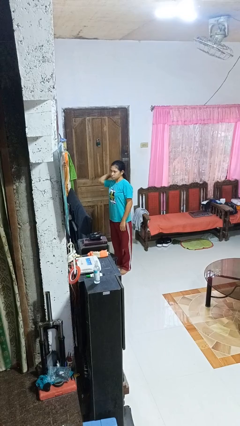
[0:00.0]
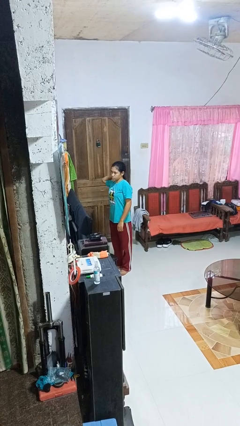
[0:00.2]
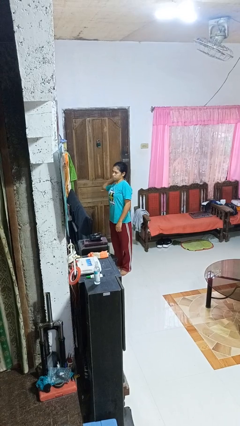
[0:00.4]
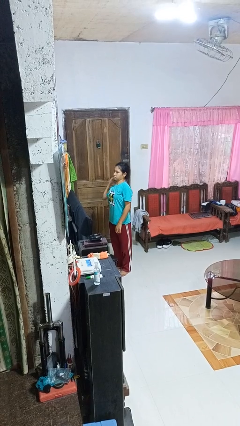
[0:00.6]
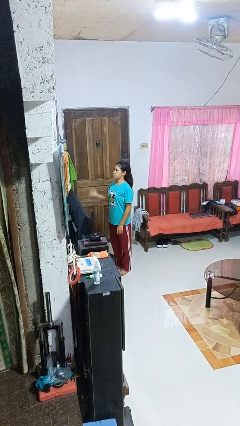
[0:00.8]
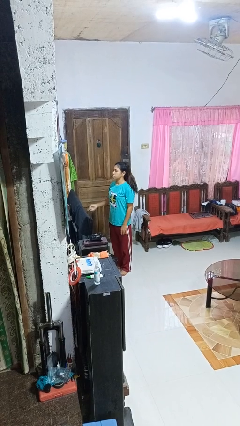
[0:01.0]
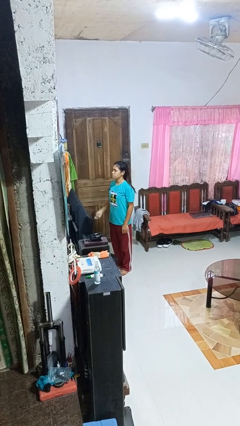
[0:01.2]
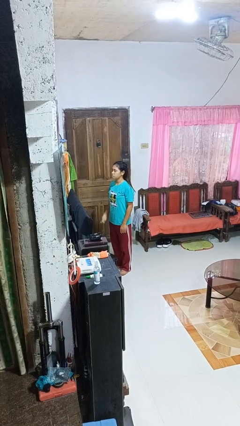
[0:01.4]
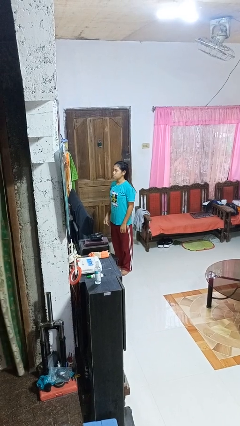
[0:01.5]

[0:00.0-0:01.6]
person takes off hairtie

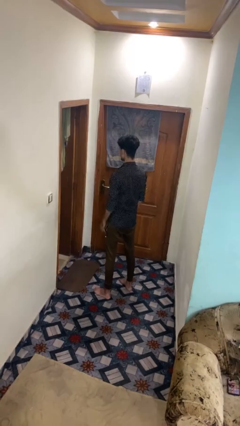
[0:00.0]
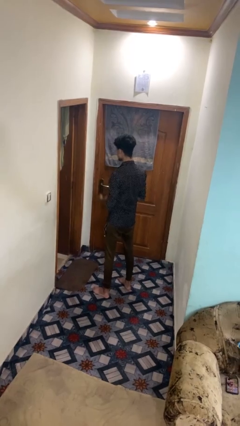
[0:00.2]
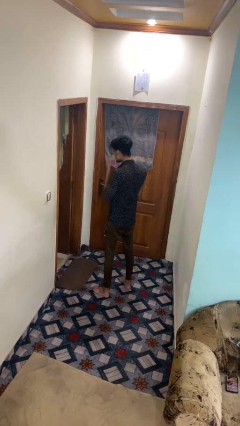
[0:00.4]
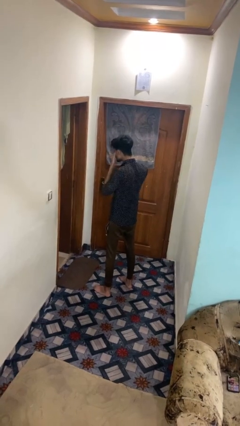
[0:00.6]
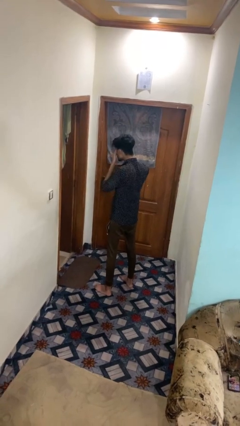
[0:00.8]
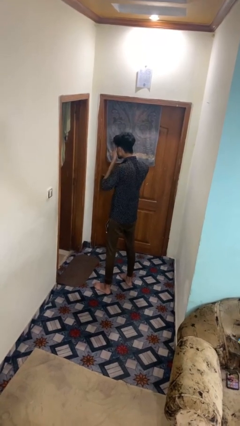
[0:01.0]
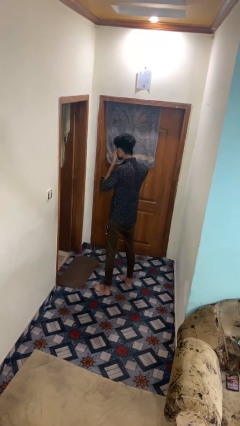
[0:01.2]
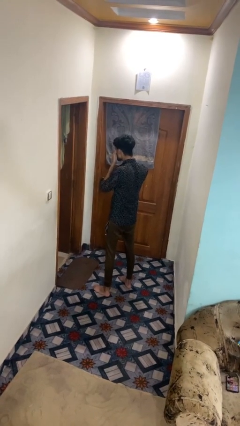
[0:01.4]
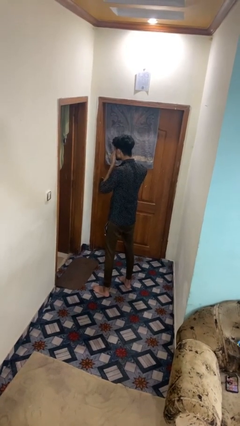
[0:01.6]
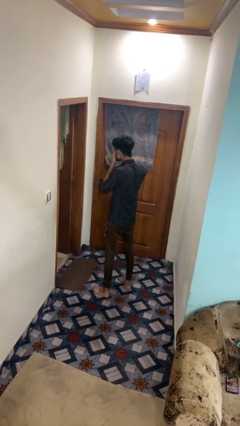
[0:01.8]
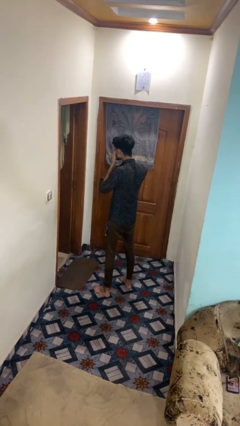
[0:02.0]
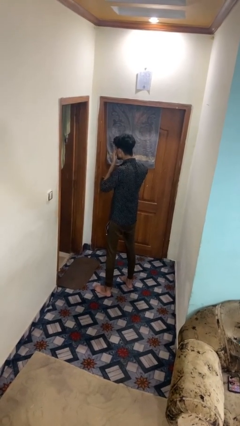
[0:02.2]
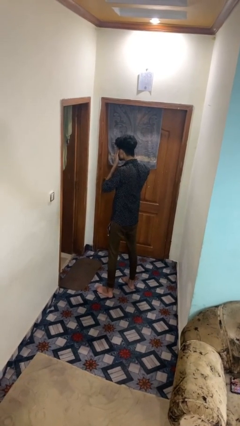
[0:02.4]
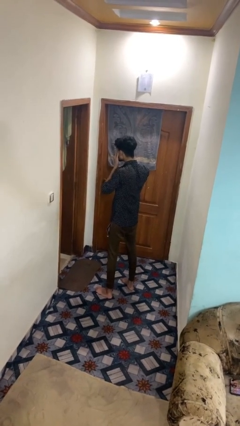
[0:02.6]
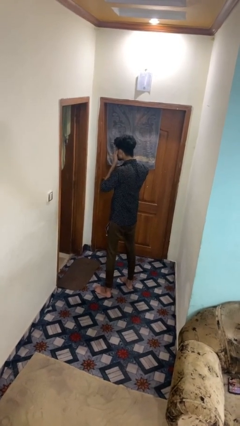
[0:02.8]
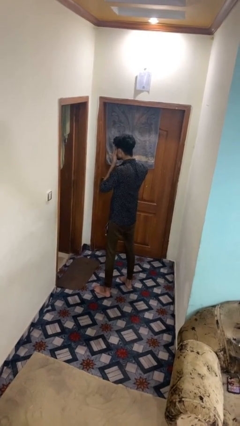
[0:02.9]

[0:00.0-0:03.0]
person rubs eyes

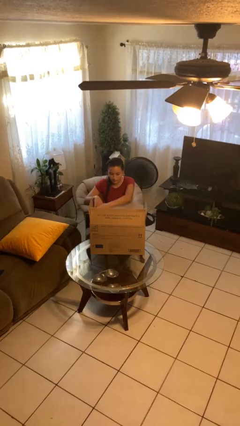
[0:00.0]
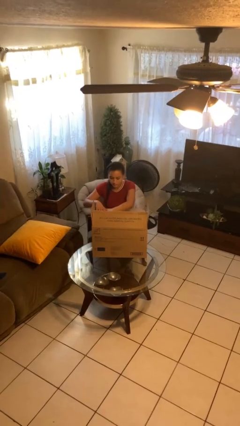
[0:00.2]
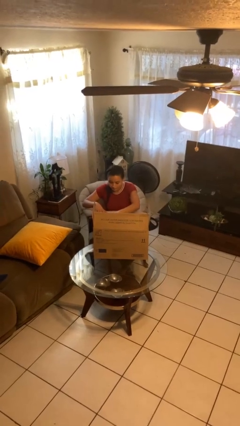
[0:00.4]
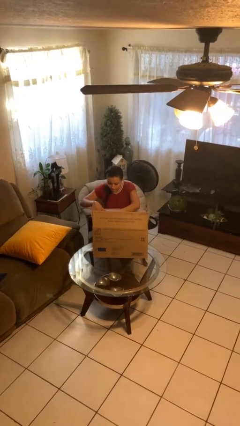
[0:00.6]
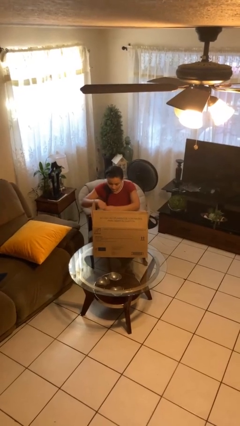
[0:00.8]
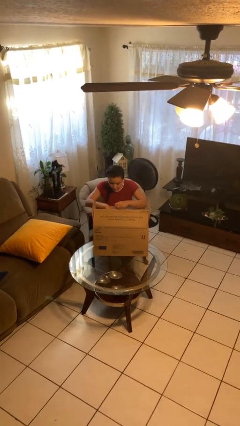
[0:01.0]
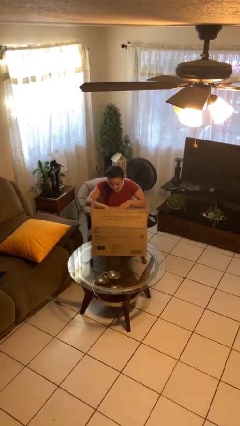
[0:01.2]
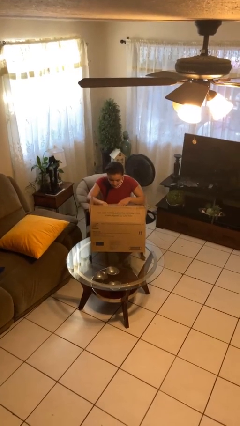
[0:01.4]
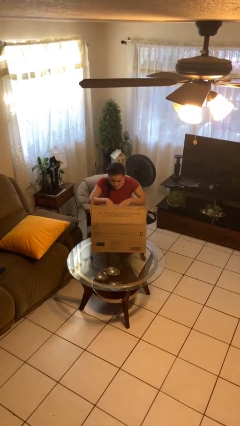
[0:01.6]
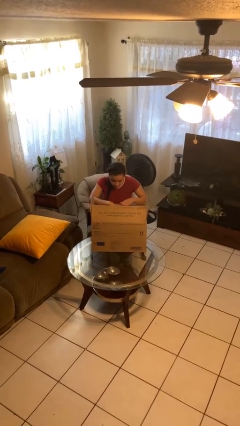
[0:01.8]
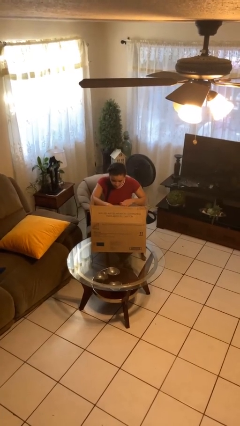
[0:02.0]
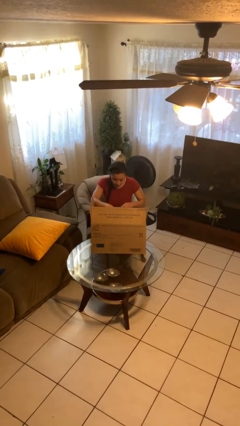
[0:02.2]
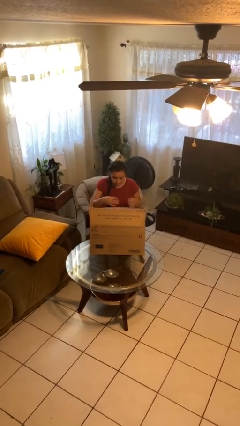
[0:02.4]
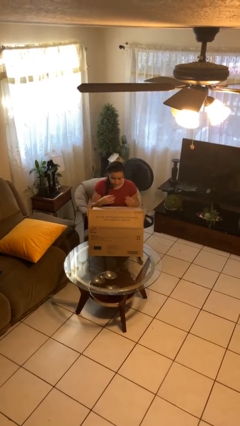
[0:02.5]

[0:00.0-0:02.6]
person searches in box

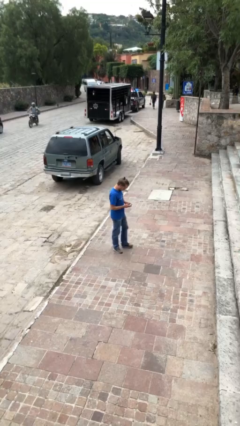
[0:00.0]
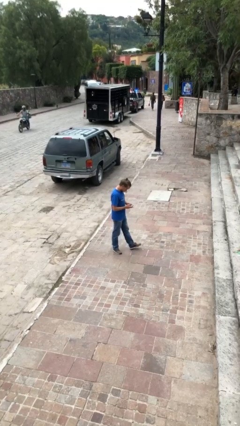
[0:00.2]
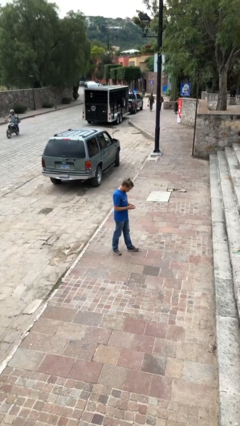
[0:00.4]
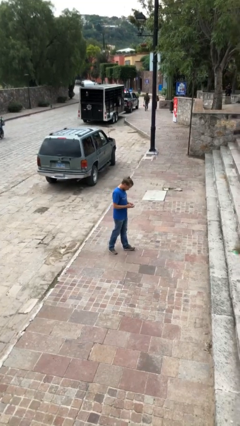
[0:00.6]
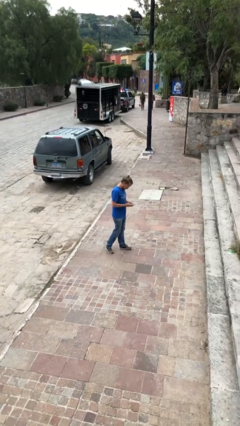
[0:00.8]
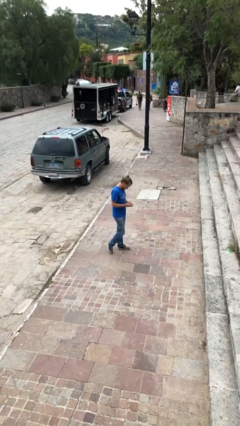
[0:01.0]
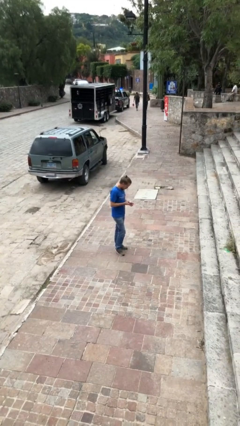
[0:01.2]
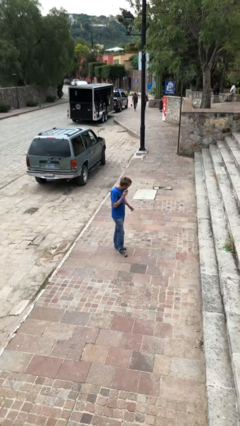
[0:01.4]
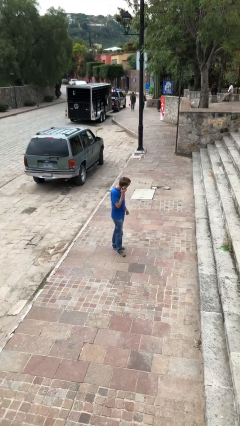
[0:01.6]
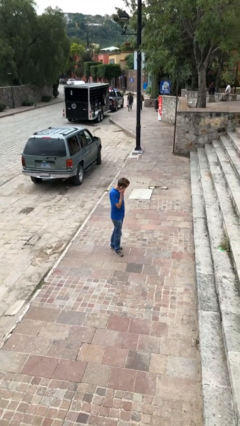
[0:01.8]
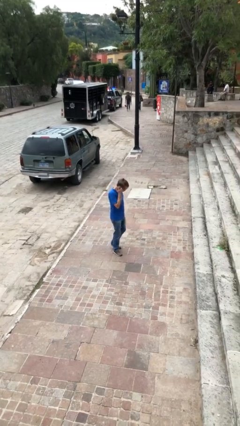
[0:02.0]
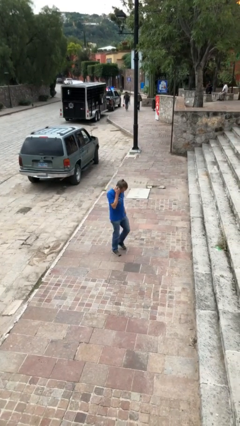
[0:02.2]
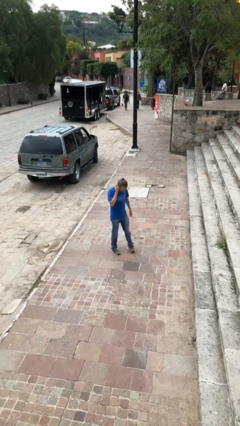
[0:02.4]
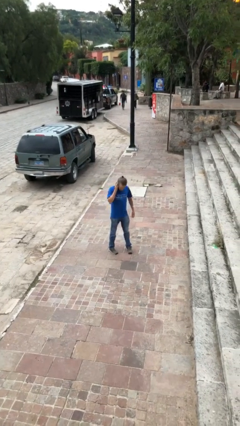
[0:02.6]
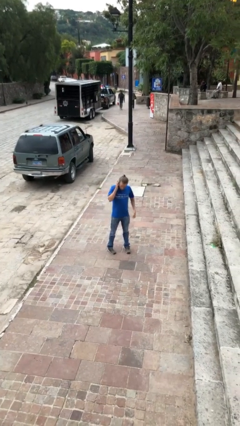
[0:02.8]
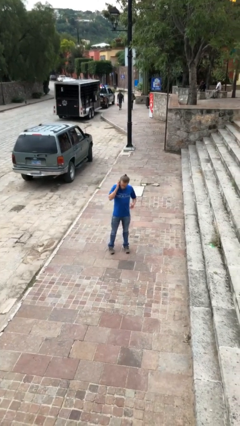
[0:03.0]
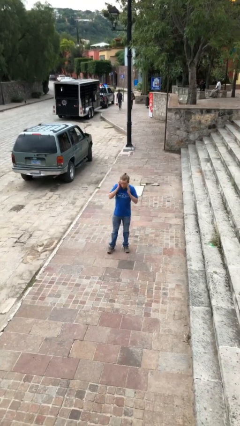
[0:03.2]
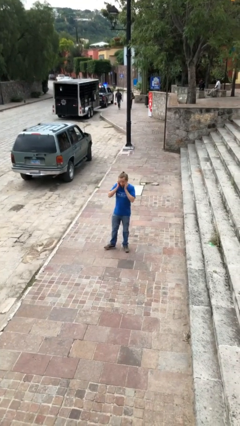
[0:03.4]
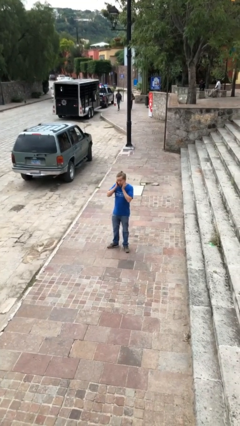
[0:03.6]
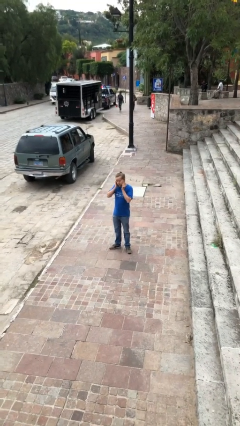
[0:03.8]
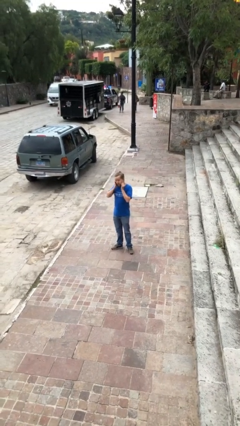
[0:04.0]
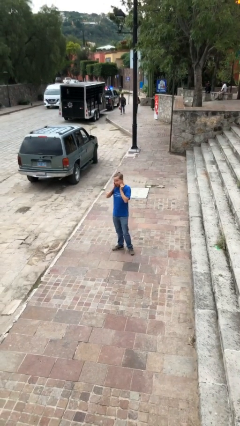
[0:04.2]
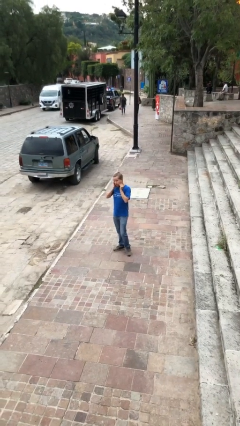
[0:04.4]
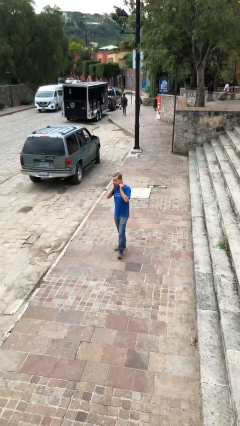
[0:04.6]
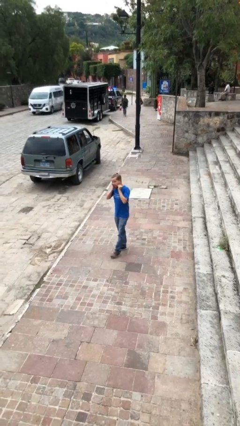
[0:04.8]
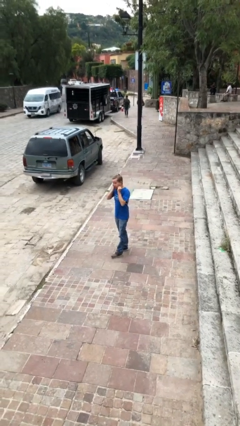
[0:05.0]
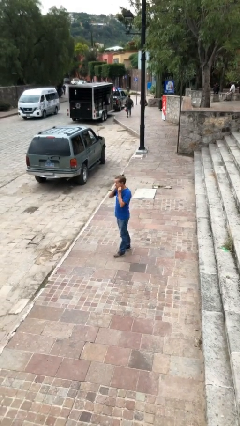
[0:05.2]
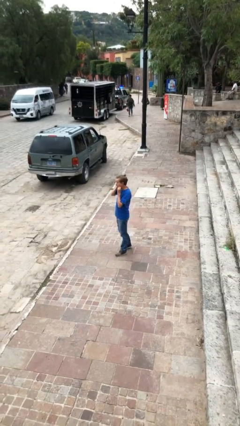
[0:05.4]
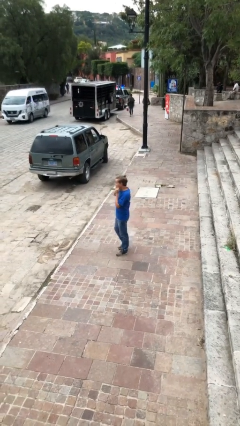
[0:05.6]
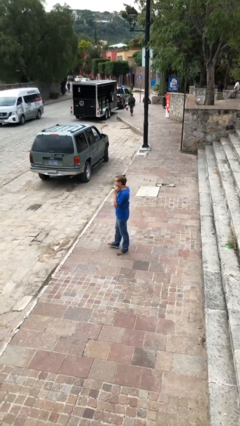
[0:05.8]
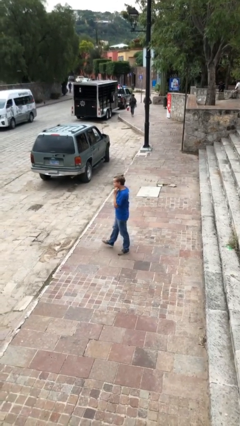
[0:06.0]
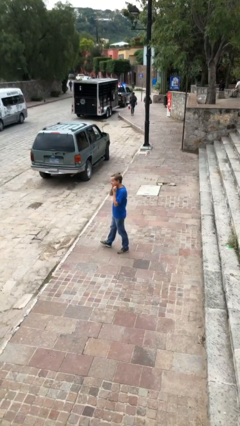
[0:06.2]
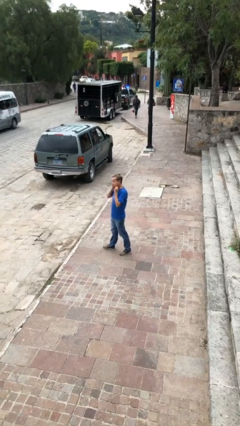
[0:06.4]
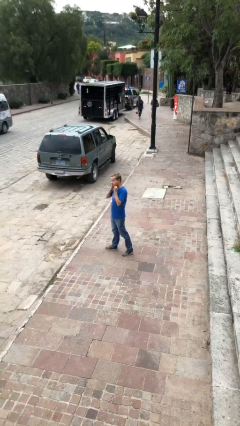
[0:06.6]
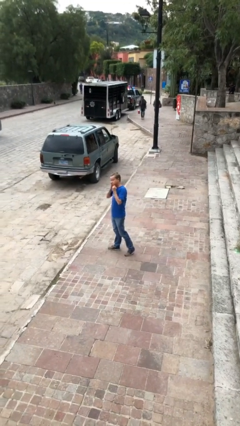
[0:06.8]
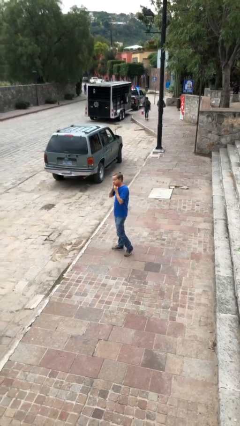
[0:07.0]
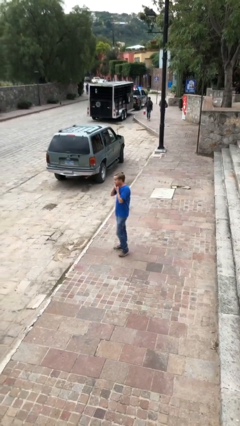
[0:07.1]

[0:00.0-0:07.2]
person talks on phone

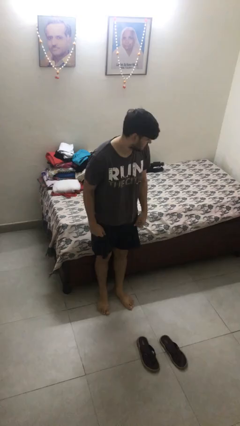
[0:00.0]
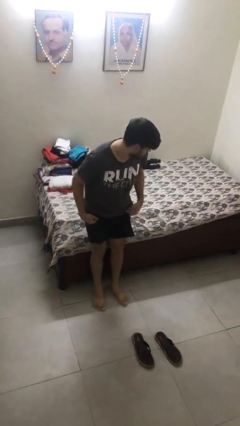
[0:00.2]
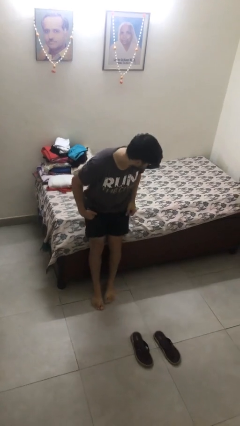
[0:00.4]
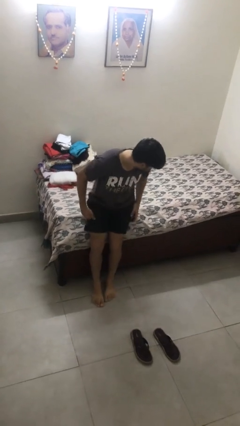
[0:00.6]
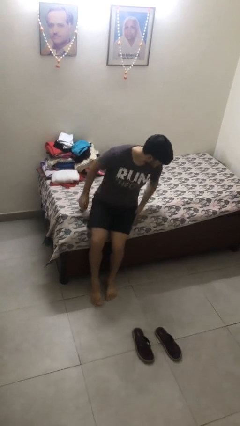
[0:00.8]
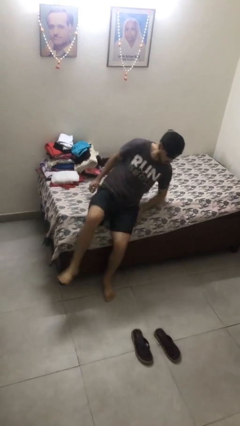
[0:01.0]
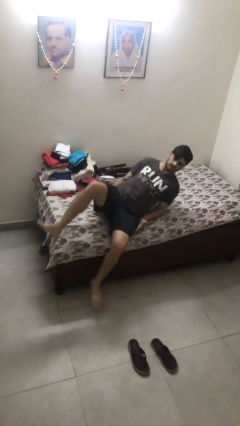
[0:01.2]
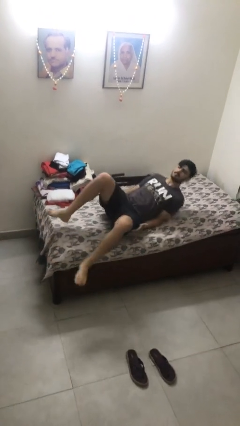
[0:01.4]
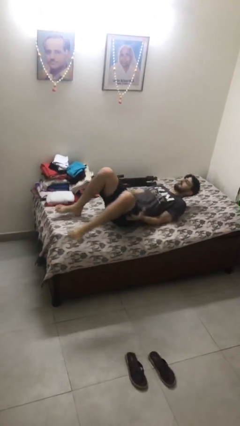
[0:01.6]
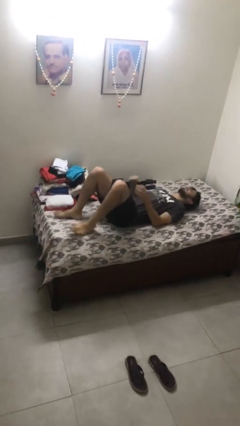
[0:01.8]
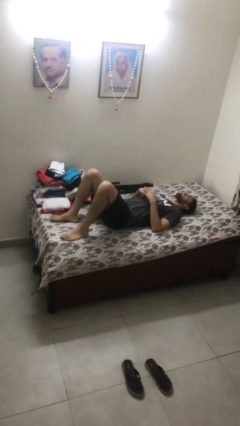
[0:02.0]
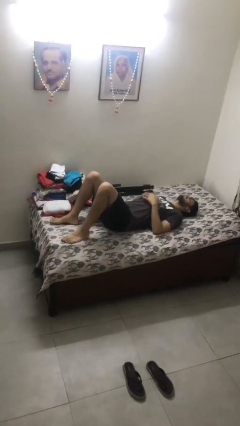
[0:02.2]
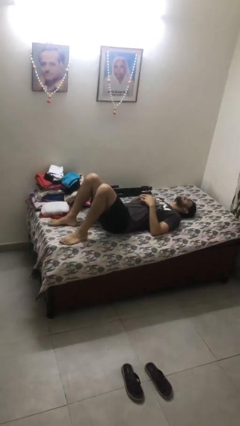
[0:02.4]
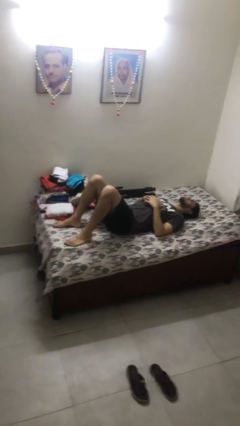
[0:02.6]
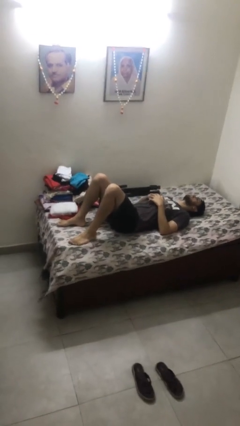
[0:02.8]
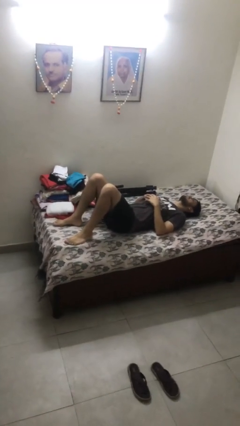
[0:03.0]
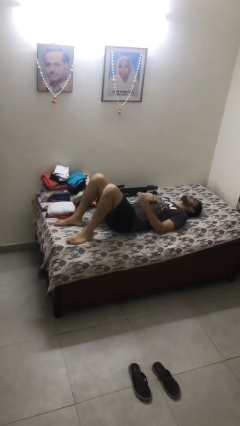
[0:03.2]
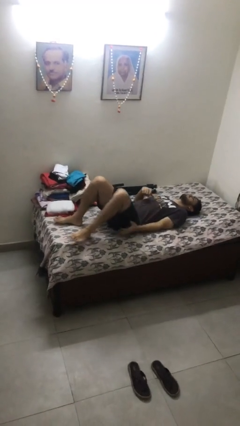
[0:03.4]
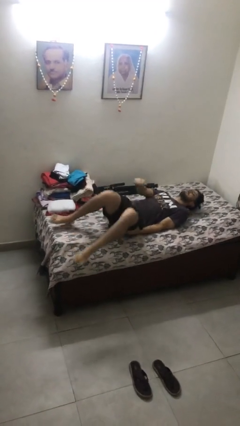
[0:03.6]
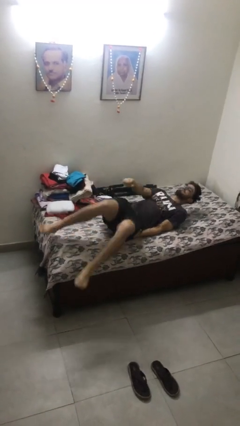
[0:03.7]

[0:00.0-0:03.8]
person lies down on bed
